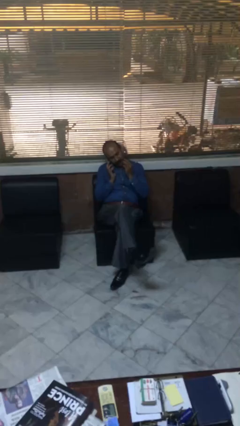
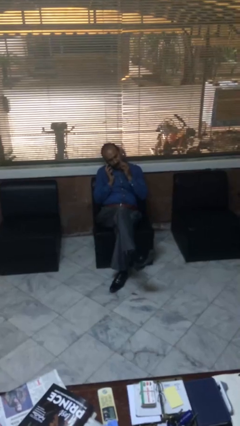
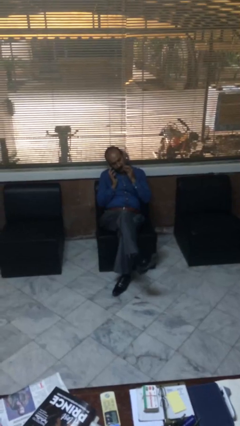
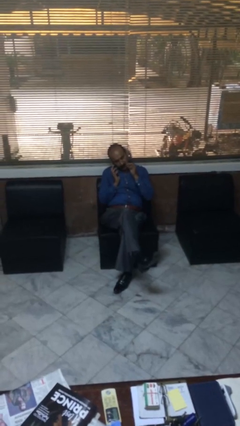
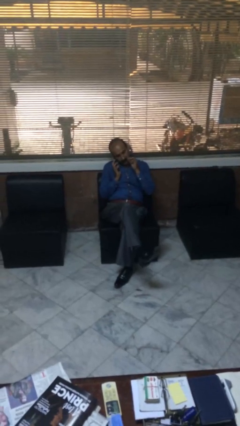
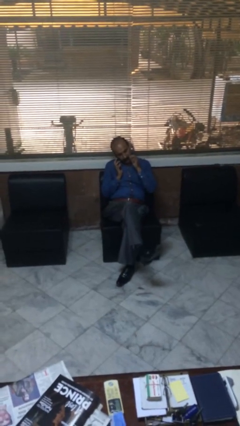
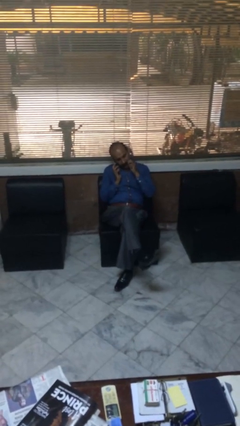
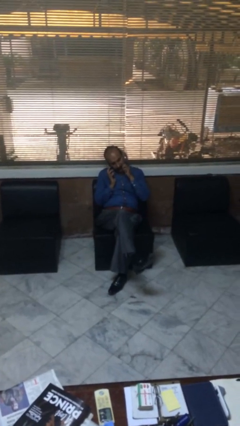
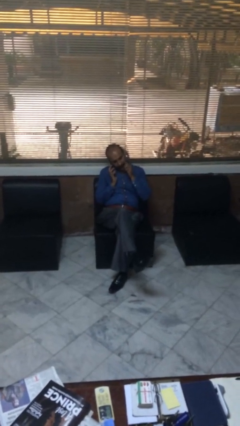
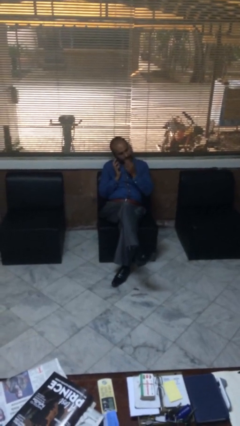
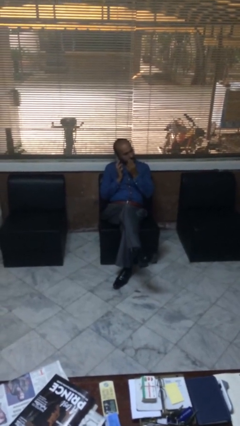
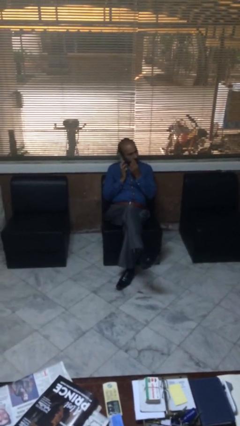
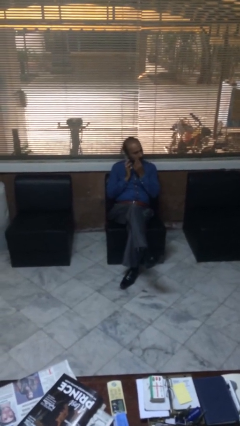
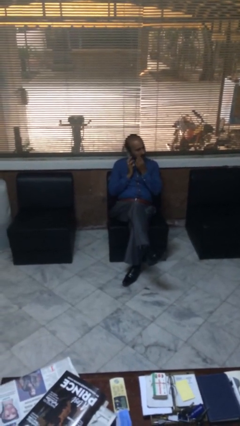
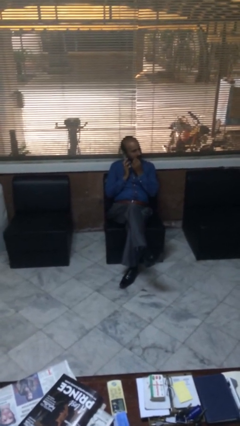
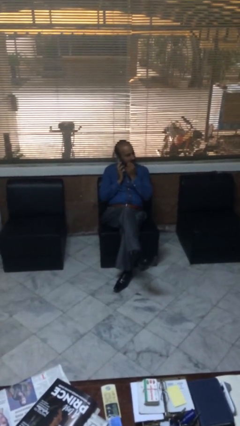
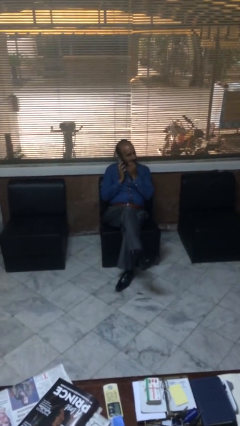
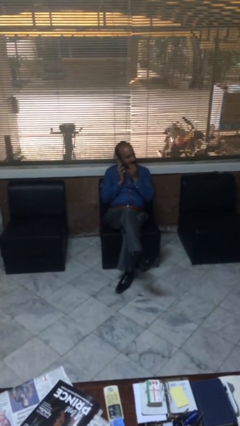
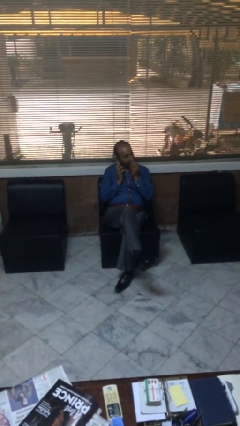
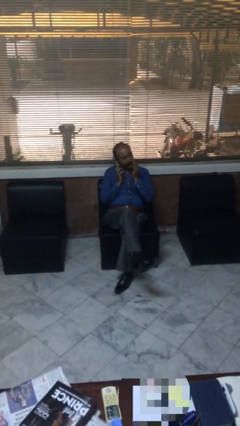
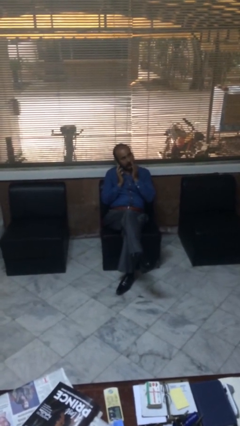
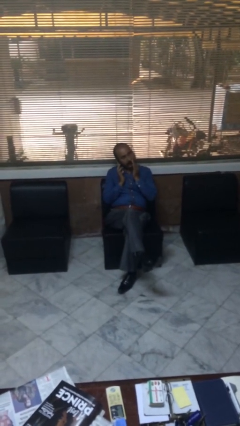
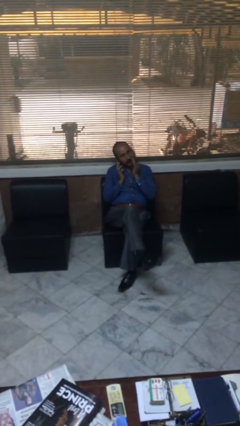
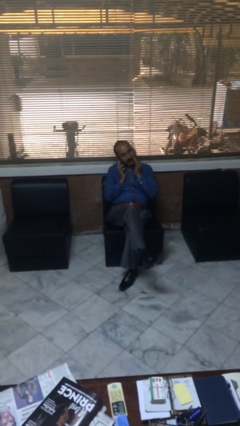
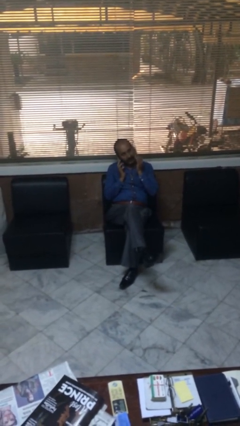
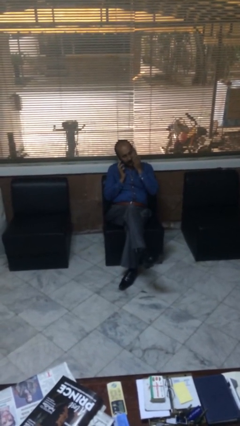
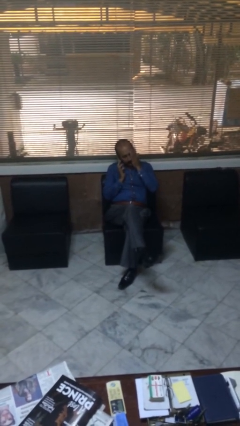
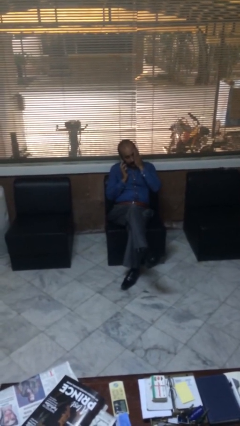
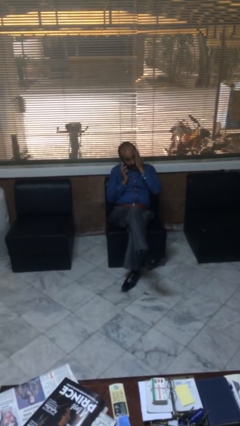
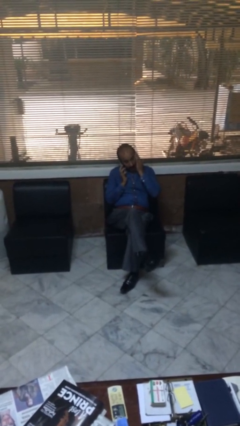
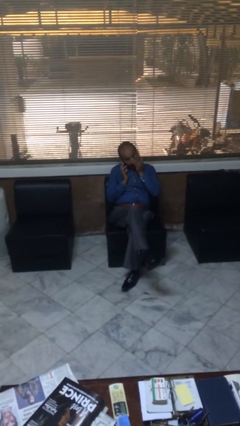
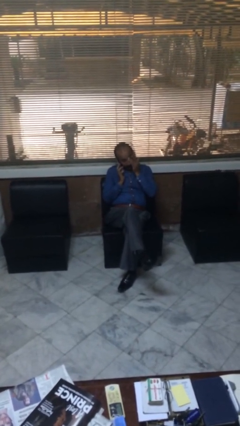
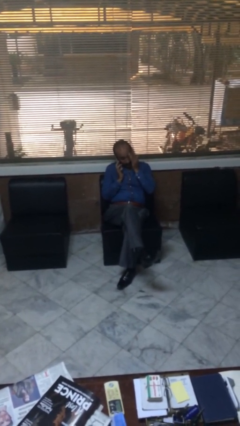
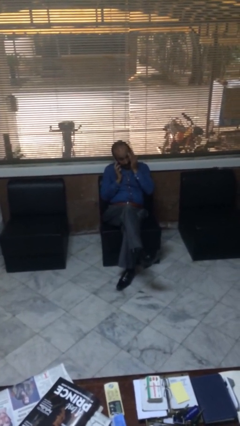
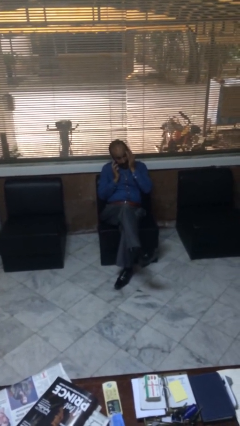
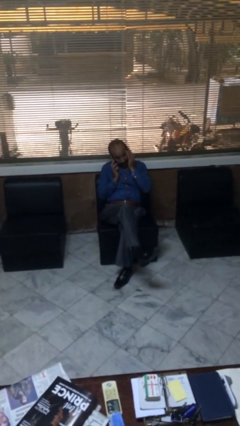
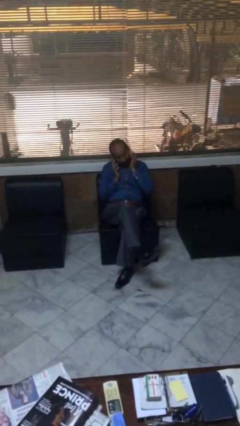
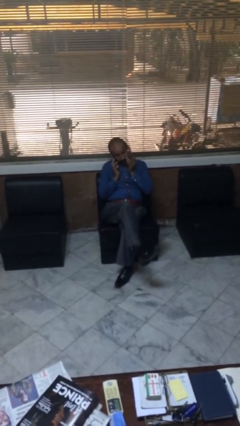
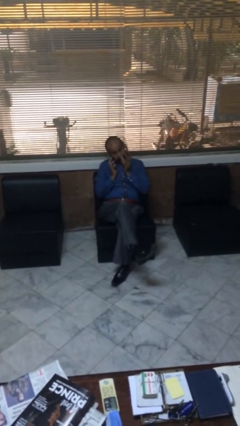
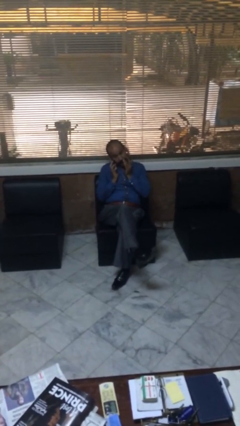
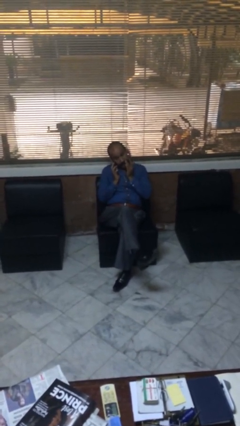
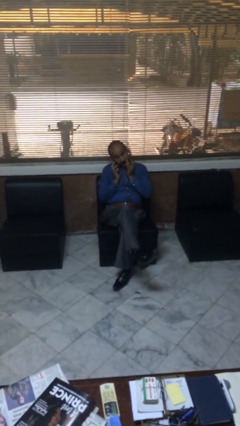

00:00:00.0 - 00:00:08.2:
person talks on phone

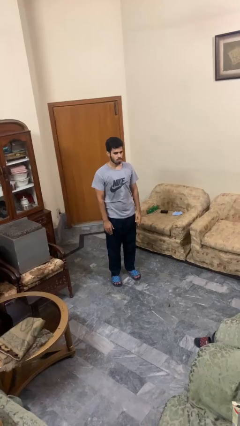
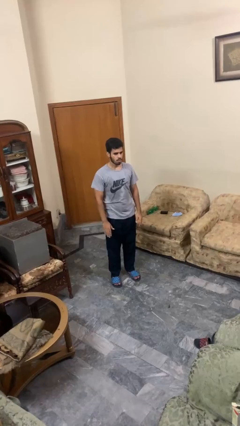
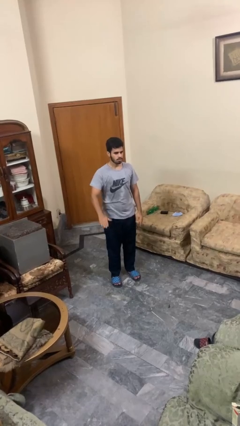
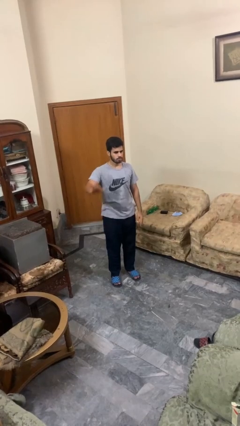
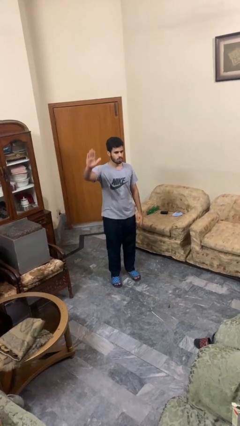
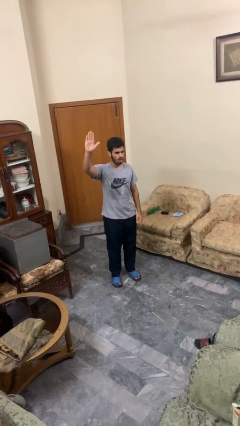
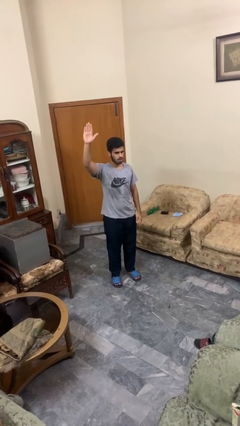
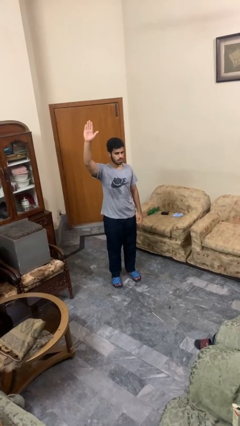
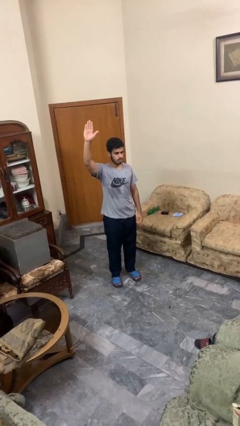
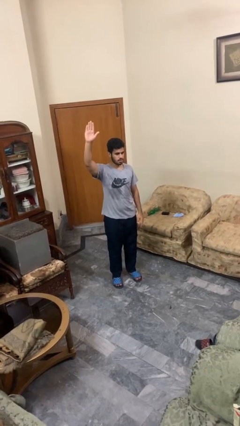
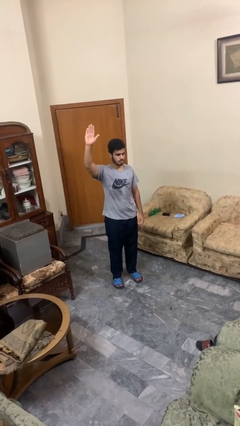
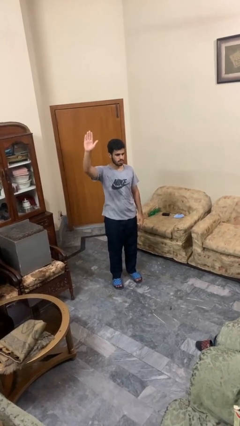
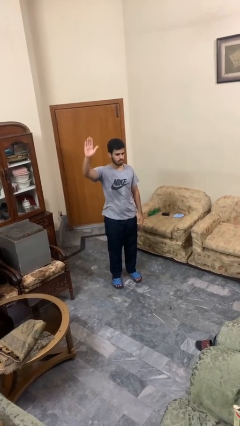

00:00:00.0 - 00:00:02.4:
person gestures raise hand

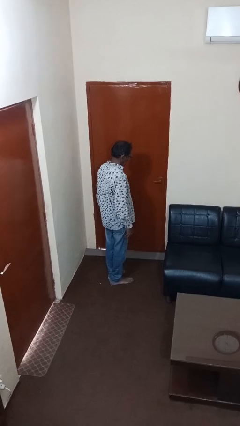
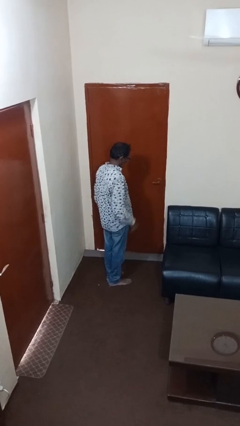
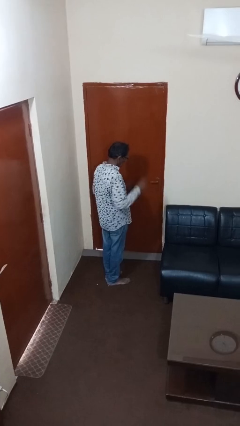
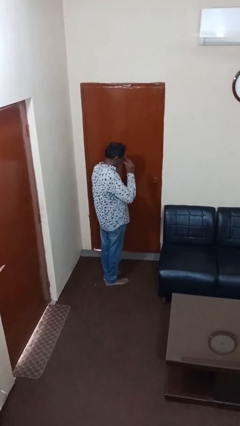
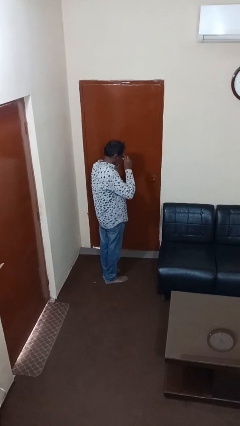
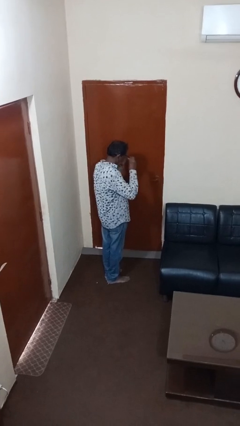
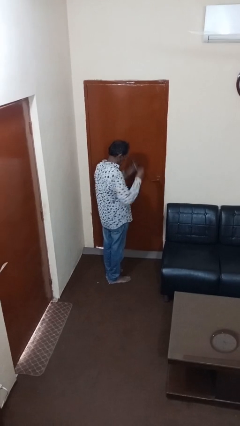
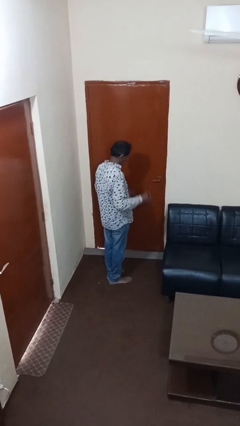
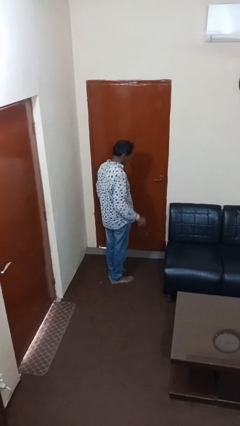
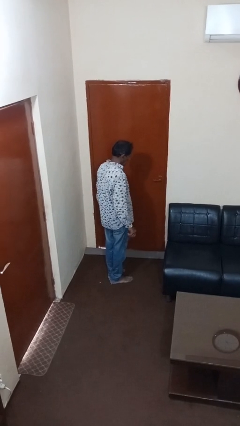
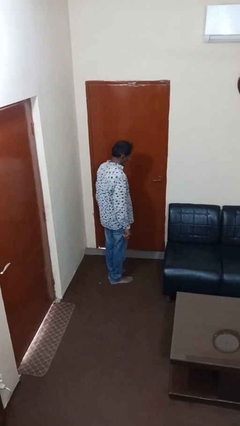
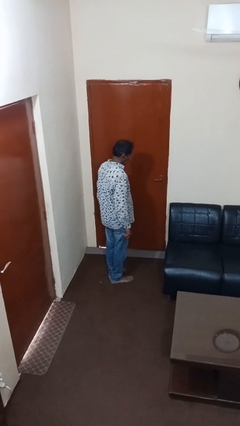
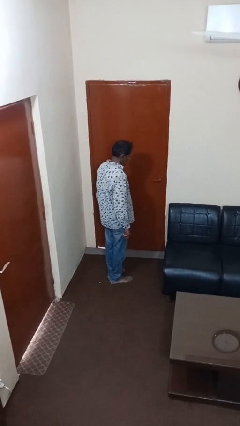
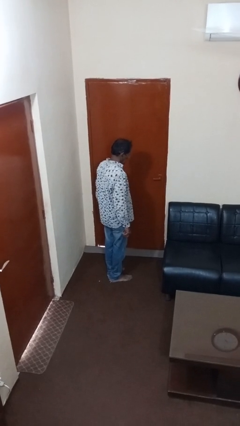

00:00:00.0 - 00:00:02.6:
person takes off glasses

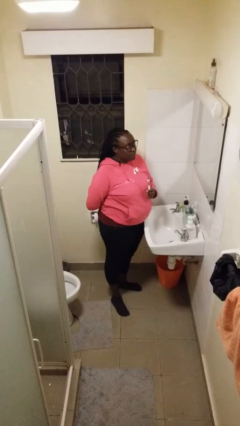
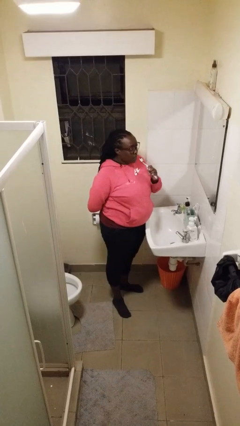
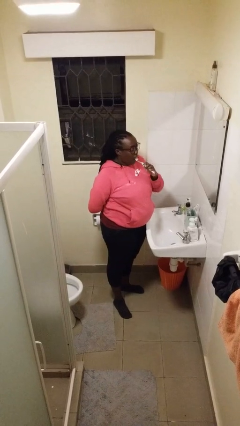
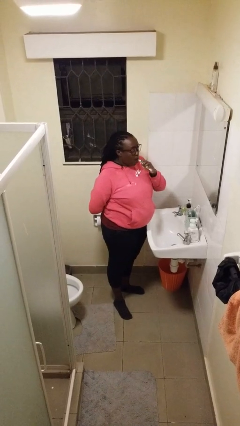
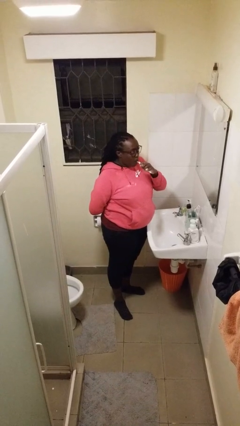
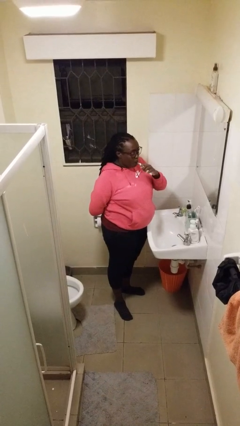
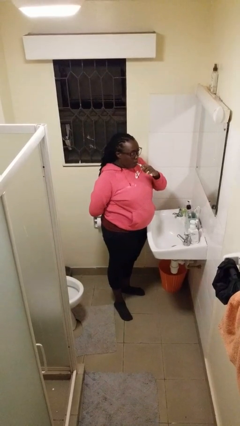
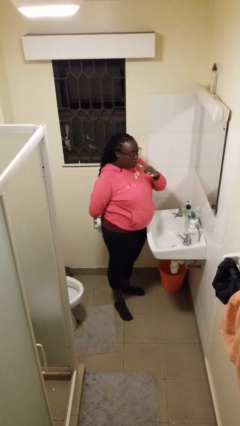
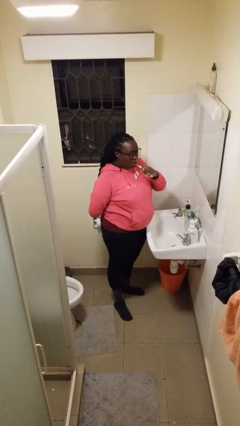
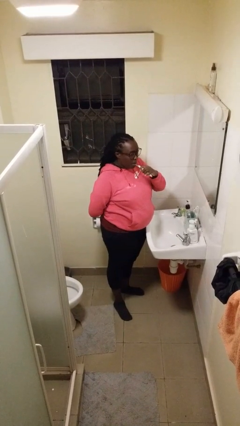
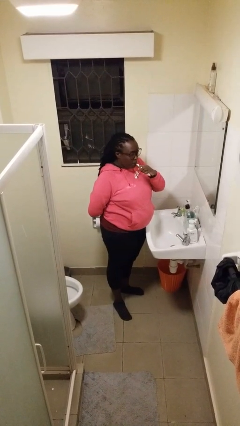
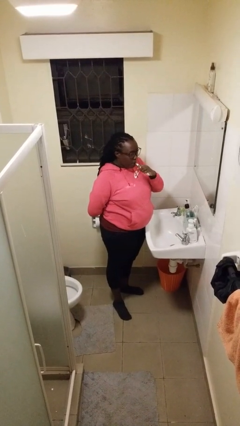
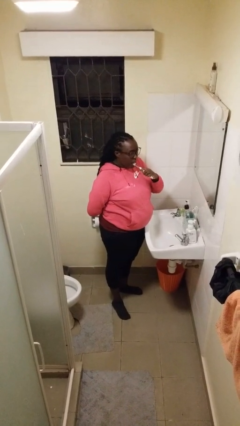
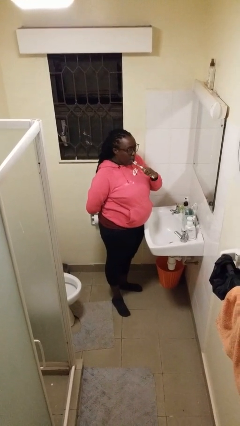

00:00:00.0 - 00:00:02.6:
person brushes teeth

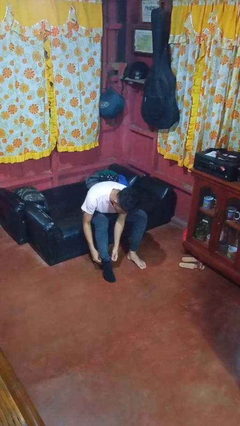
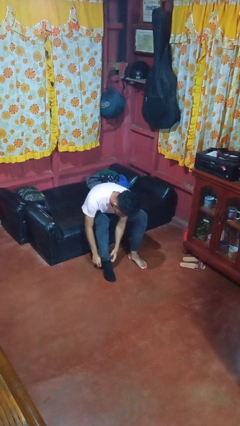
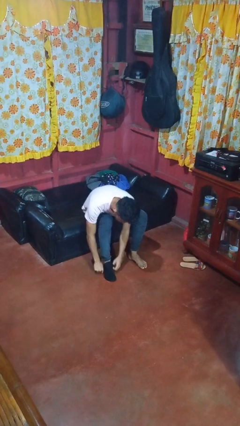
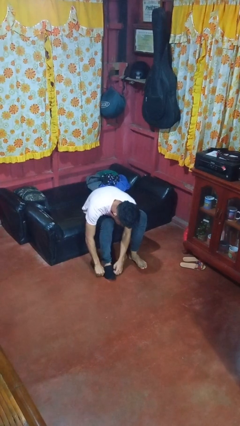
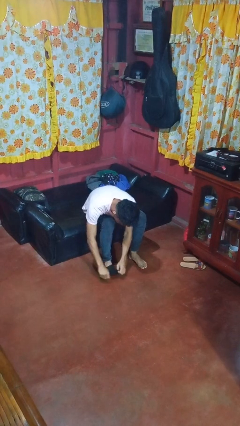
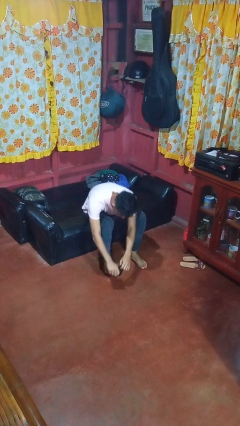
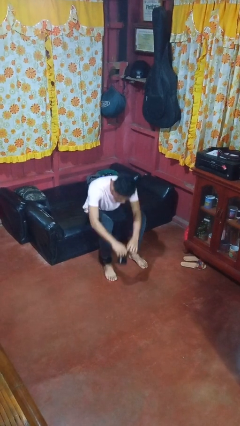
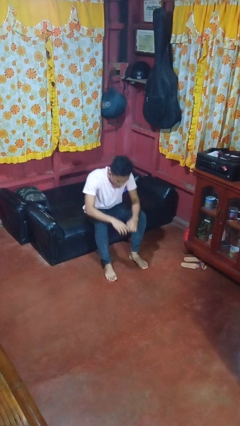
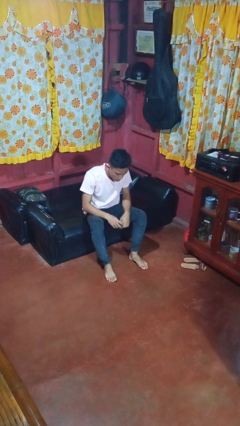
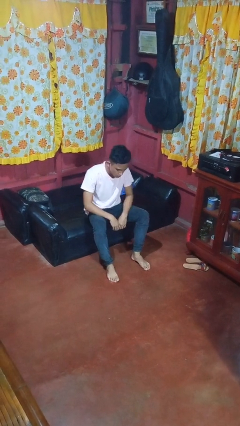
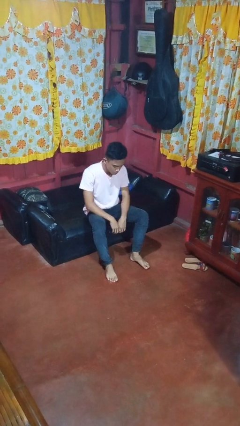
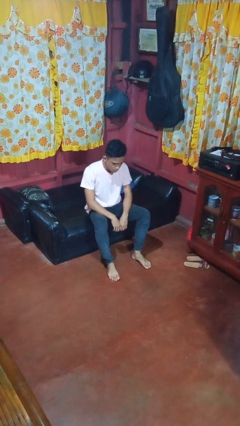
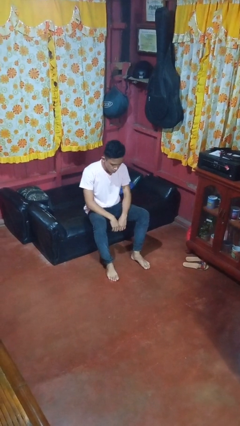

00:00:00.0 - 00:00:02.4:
person takes off socks
